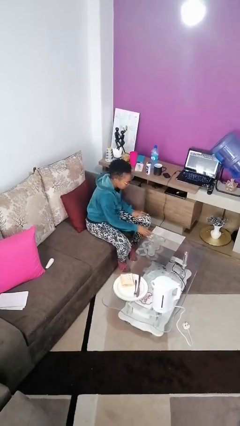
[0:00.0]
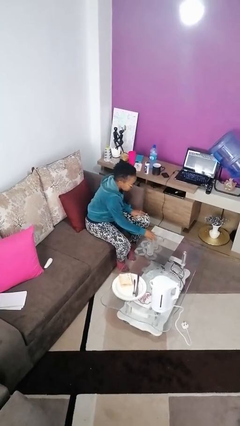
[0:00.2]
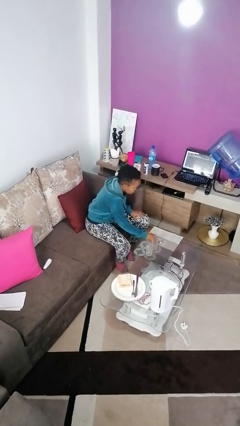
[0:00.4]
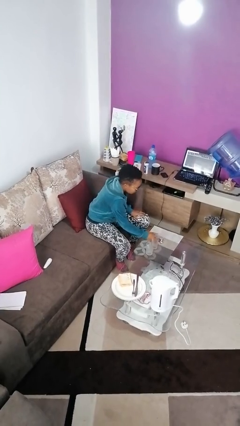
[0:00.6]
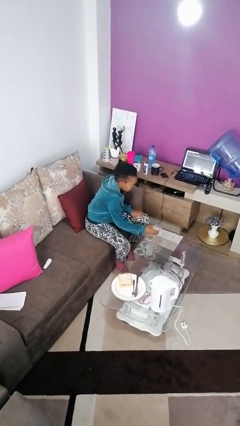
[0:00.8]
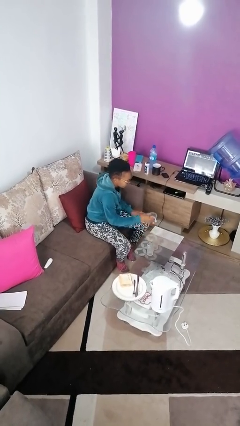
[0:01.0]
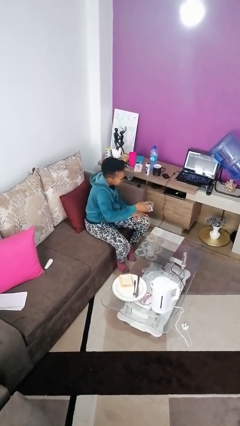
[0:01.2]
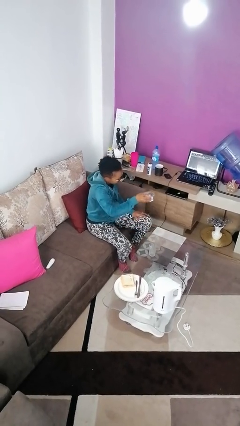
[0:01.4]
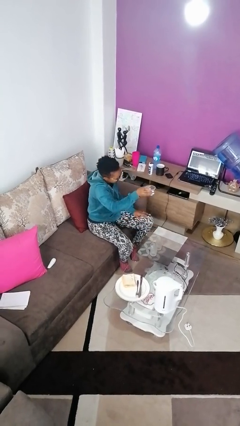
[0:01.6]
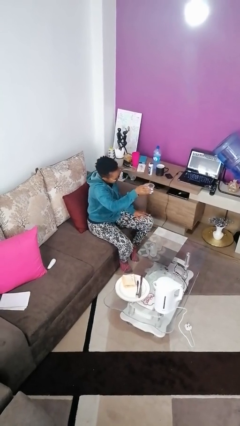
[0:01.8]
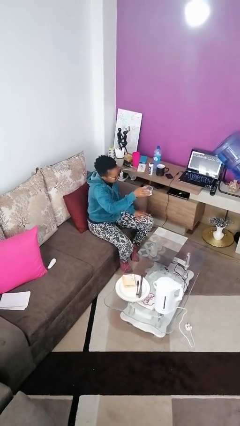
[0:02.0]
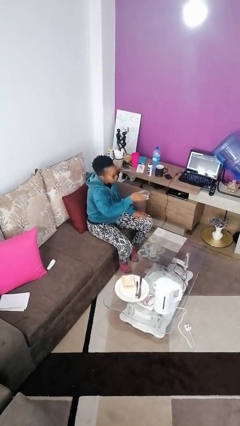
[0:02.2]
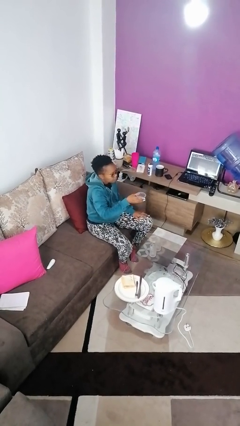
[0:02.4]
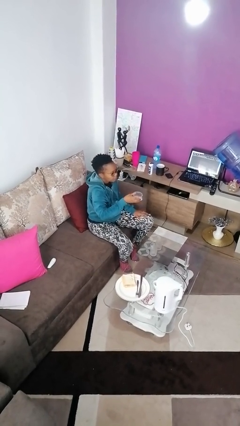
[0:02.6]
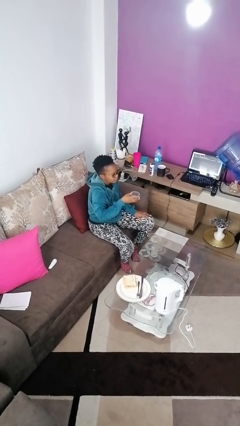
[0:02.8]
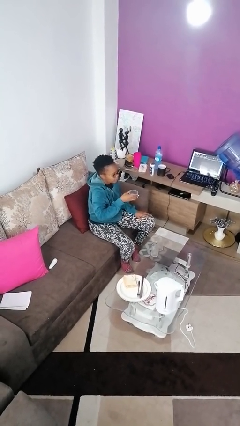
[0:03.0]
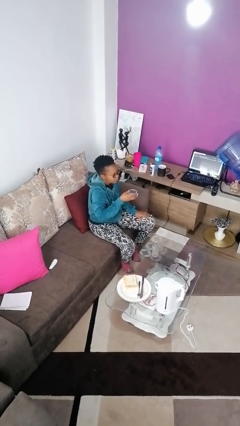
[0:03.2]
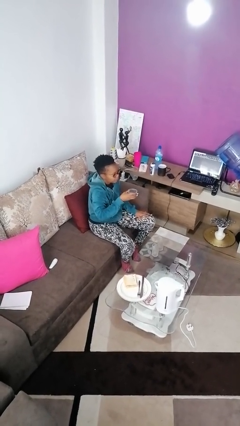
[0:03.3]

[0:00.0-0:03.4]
person picks up object from table

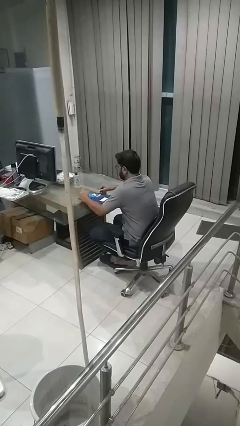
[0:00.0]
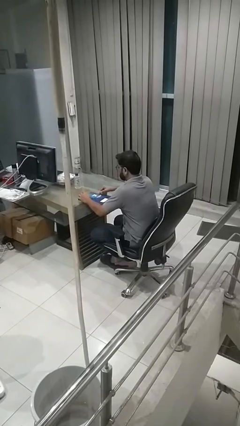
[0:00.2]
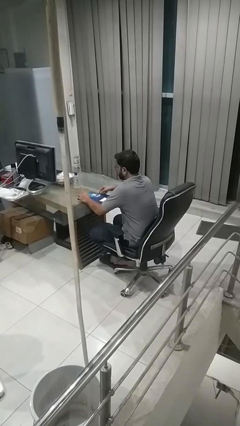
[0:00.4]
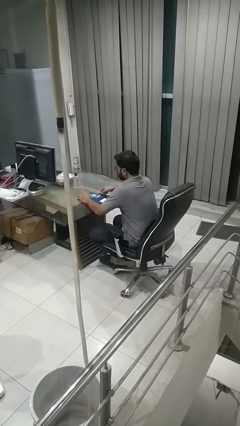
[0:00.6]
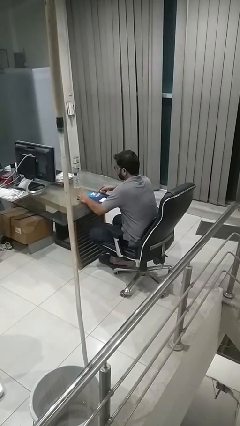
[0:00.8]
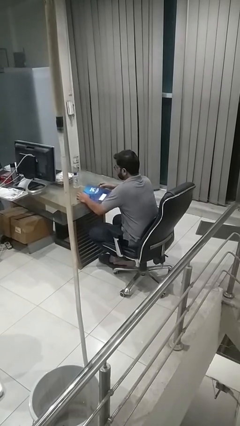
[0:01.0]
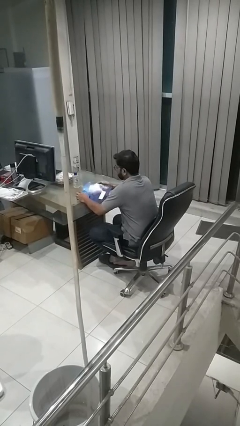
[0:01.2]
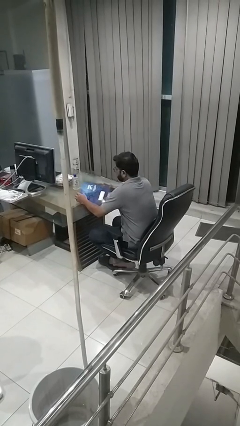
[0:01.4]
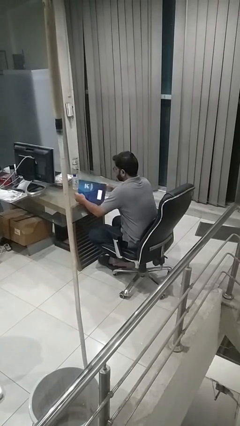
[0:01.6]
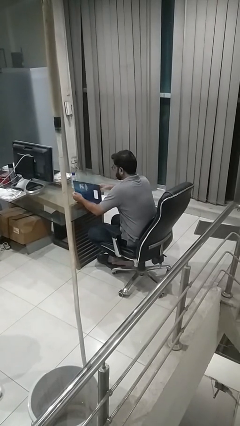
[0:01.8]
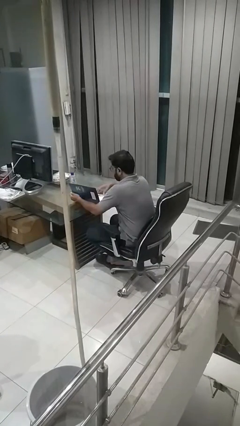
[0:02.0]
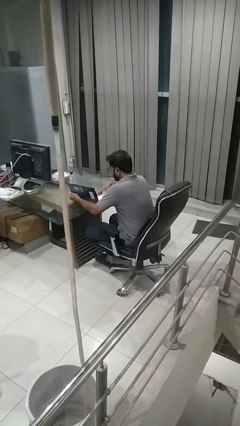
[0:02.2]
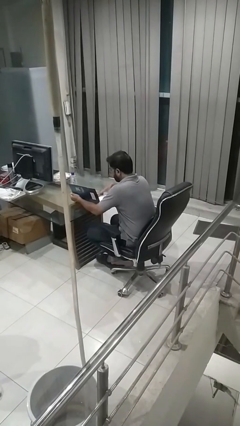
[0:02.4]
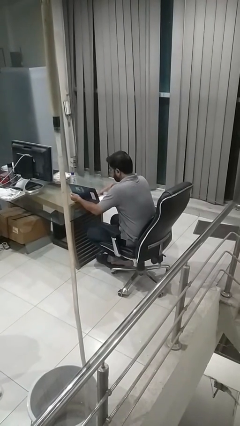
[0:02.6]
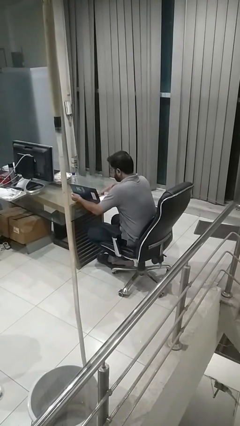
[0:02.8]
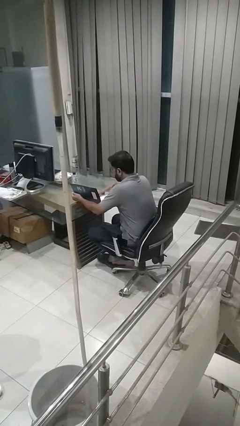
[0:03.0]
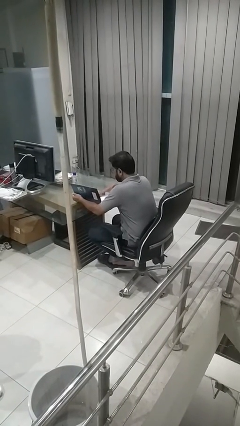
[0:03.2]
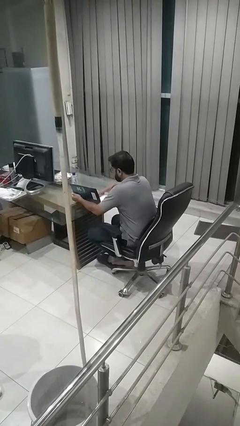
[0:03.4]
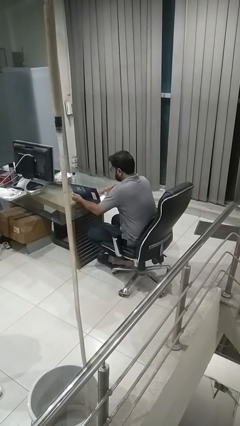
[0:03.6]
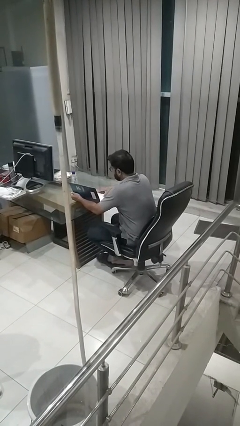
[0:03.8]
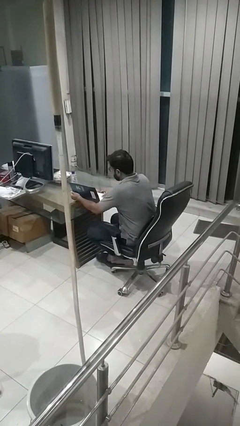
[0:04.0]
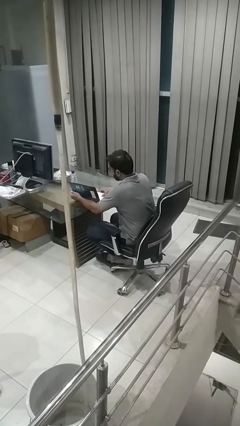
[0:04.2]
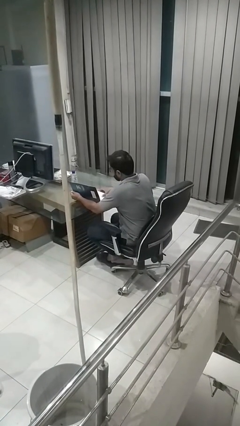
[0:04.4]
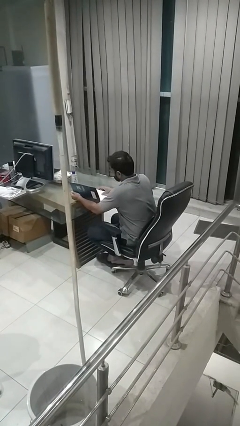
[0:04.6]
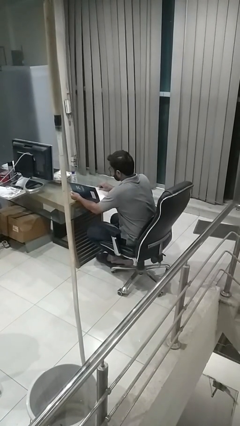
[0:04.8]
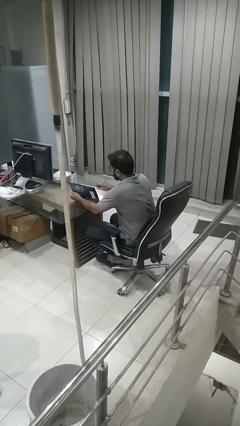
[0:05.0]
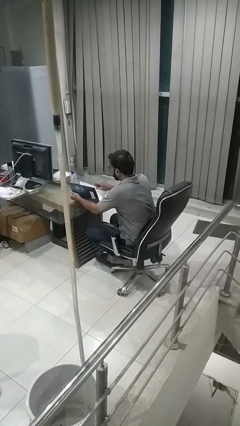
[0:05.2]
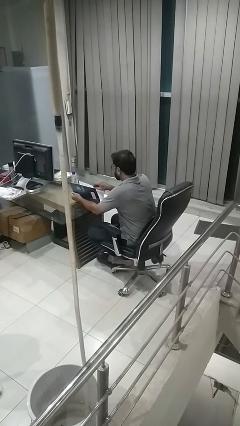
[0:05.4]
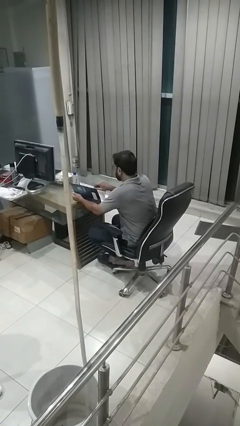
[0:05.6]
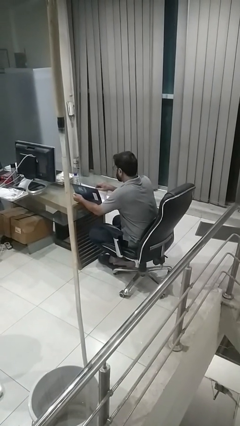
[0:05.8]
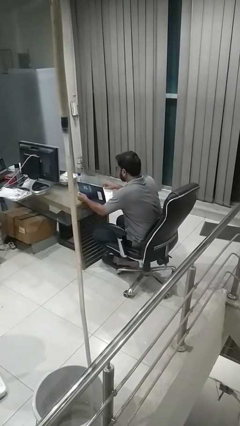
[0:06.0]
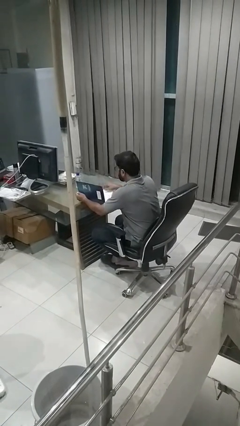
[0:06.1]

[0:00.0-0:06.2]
person reads magazine

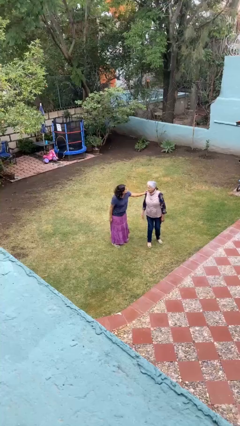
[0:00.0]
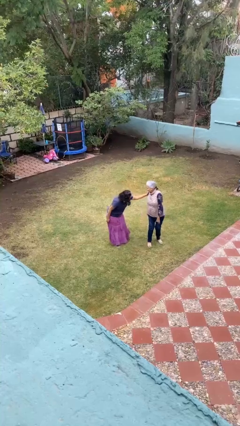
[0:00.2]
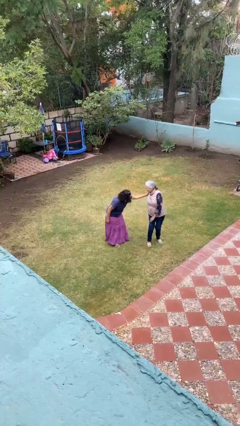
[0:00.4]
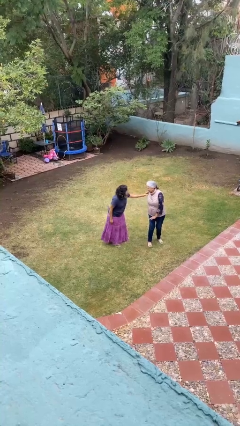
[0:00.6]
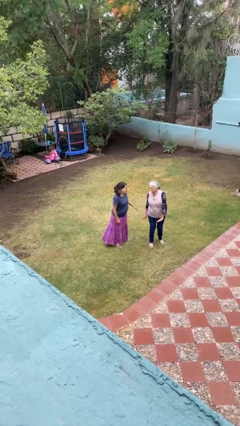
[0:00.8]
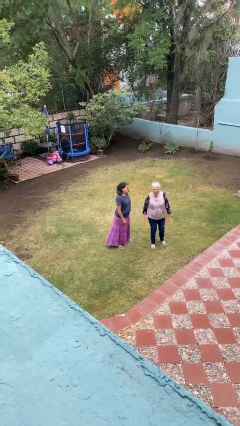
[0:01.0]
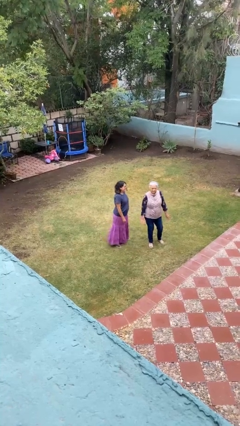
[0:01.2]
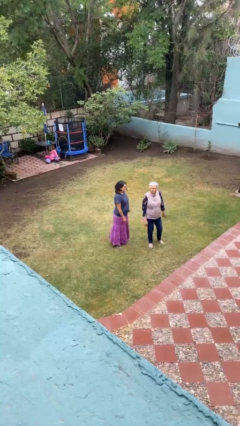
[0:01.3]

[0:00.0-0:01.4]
person spins person around

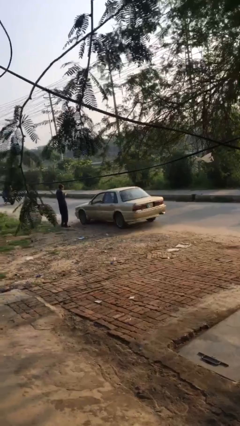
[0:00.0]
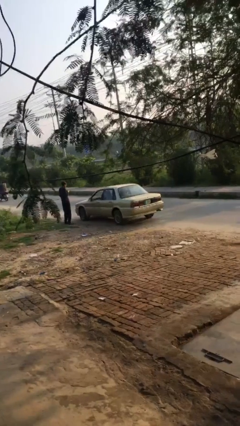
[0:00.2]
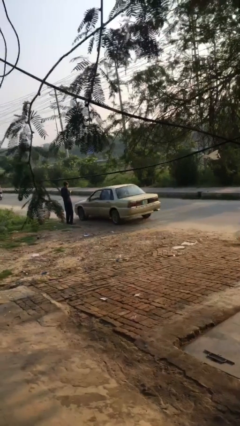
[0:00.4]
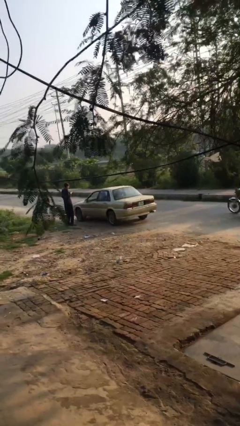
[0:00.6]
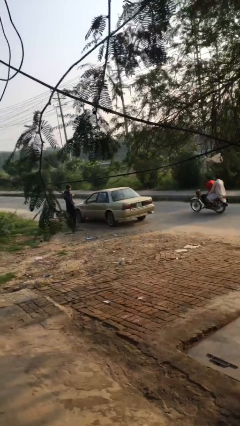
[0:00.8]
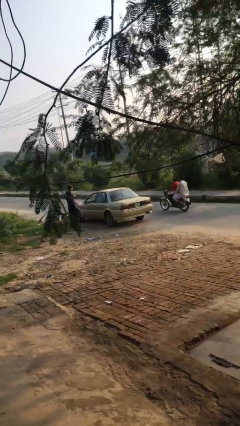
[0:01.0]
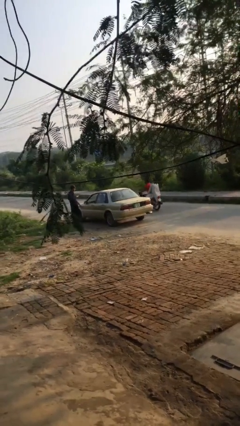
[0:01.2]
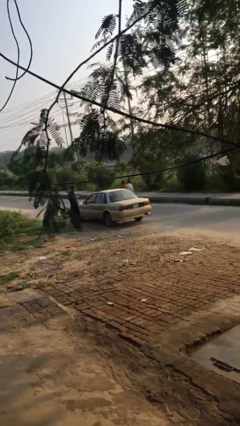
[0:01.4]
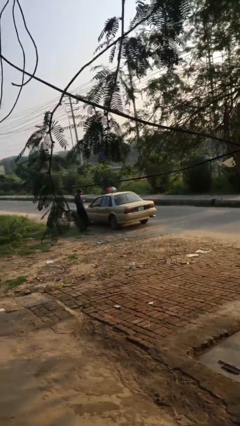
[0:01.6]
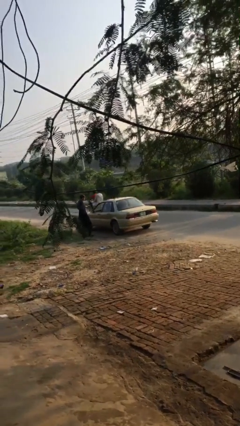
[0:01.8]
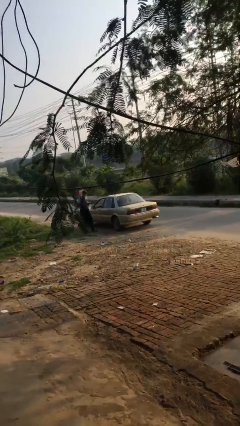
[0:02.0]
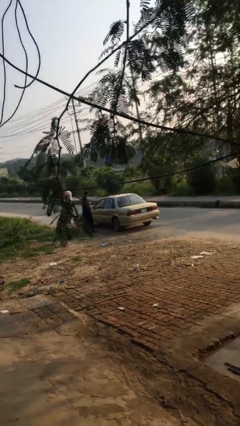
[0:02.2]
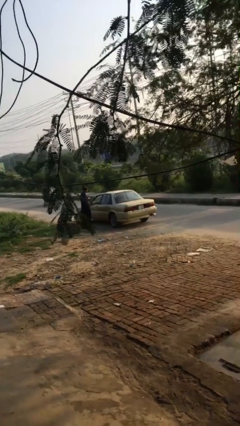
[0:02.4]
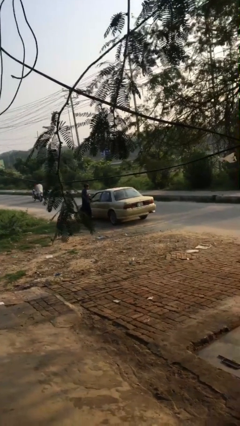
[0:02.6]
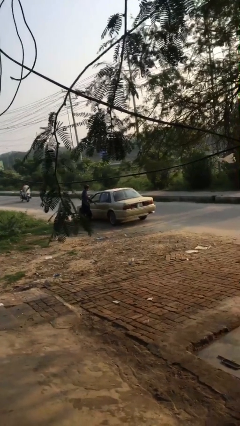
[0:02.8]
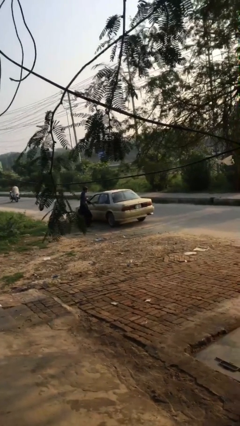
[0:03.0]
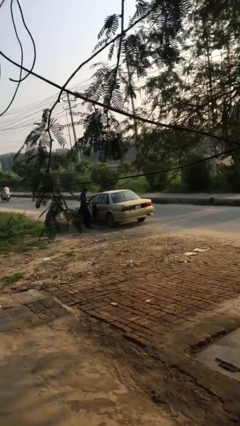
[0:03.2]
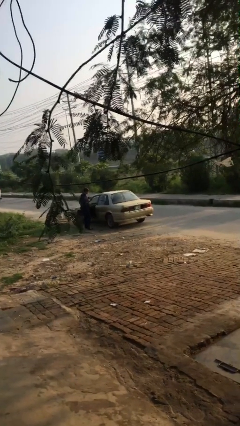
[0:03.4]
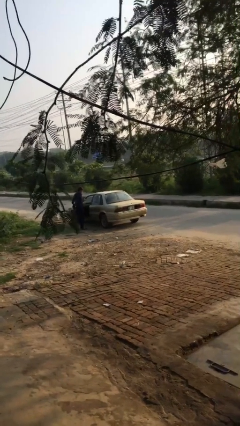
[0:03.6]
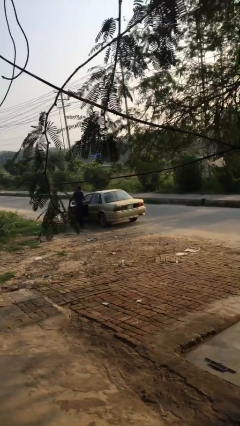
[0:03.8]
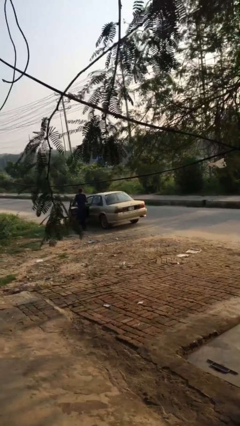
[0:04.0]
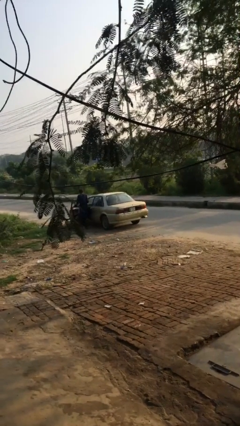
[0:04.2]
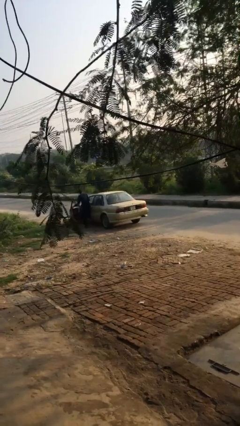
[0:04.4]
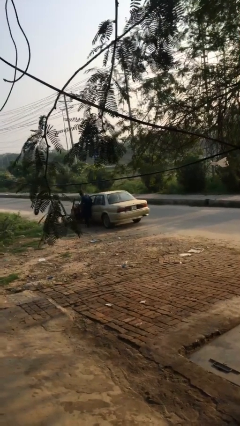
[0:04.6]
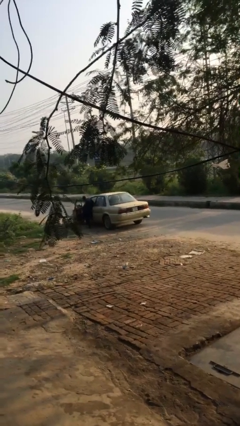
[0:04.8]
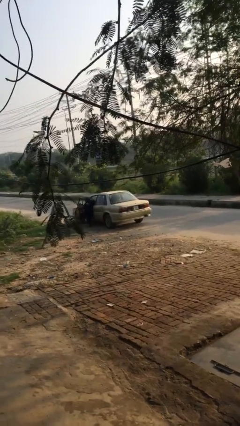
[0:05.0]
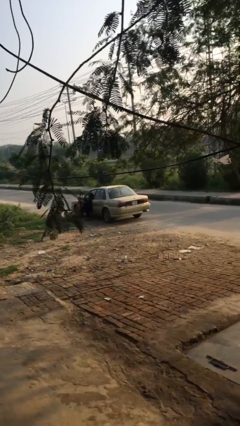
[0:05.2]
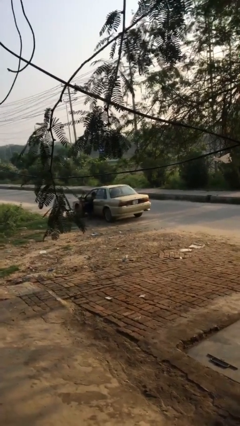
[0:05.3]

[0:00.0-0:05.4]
car picks up person

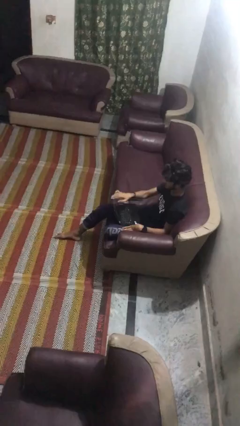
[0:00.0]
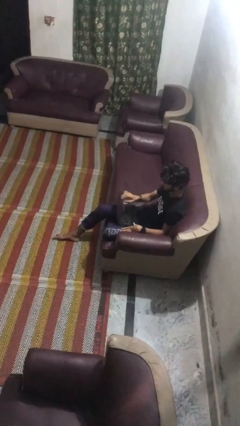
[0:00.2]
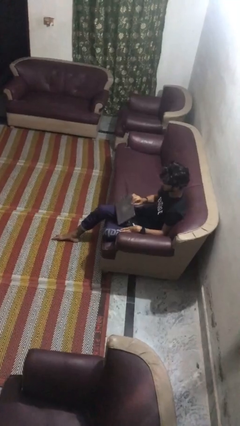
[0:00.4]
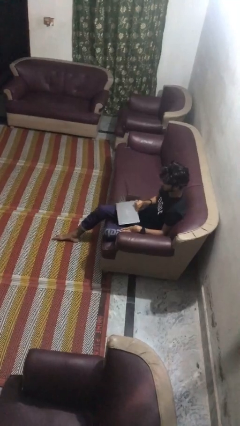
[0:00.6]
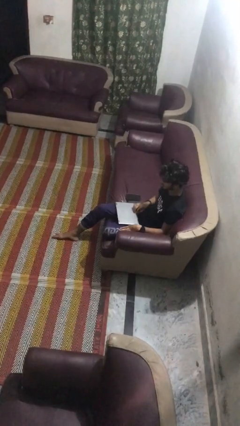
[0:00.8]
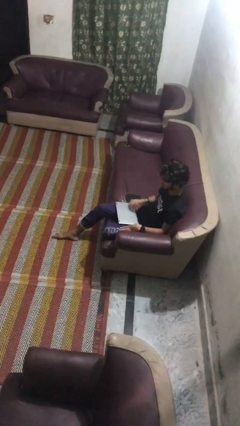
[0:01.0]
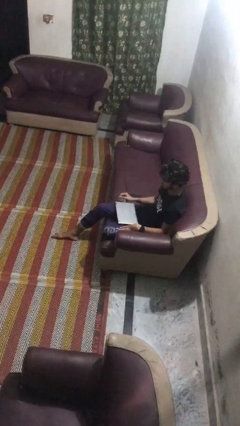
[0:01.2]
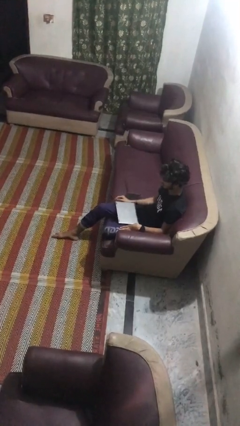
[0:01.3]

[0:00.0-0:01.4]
person closes laptop

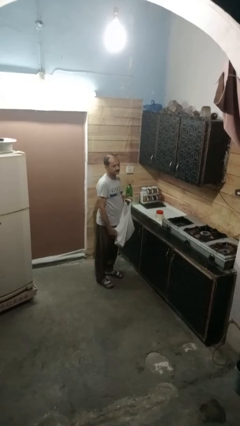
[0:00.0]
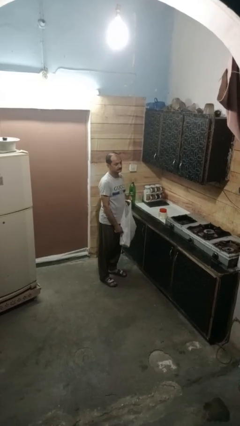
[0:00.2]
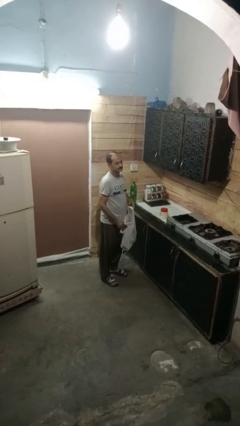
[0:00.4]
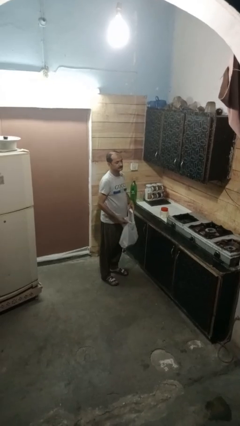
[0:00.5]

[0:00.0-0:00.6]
person puts object into bag
